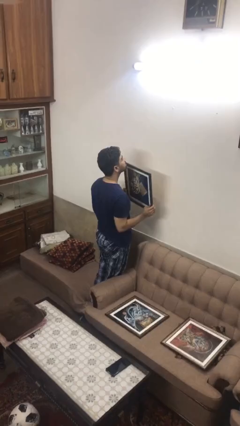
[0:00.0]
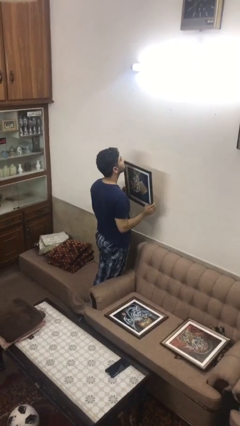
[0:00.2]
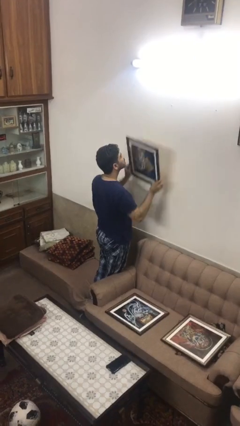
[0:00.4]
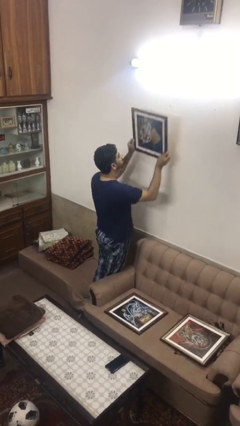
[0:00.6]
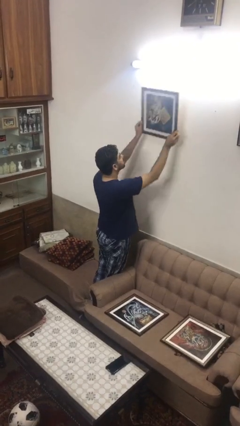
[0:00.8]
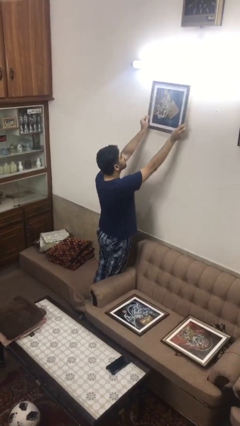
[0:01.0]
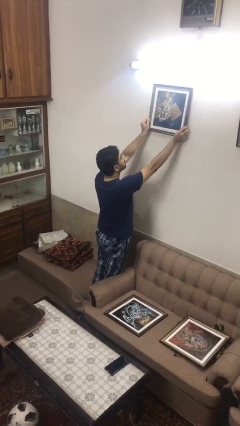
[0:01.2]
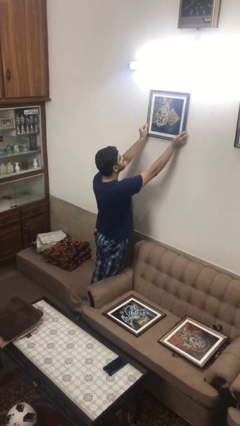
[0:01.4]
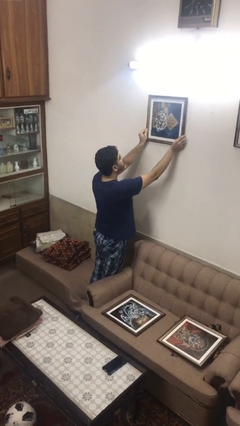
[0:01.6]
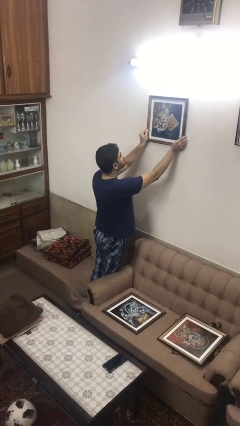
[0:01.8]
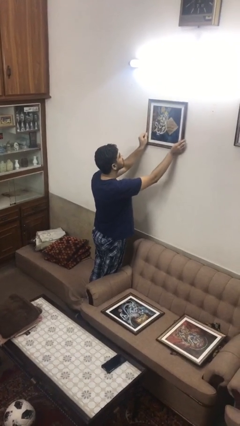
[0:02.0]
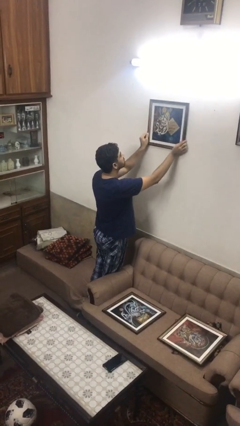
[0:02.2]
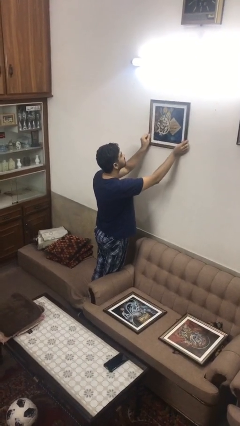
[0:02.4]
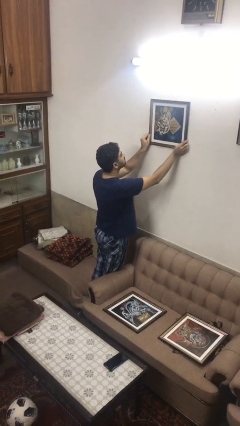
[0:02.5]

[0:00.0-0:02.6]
person puts up picture frame

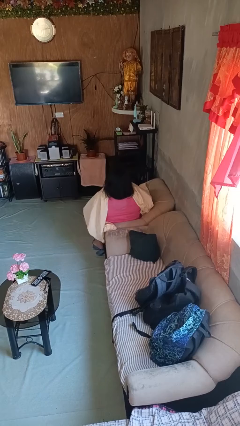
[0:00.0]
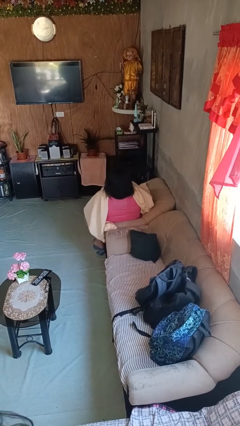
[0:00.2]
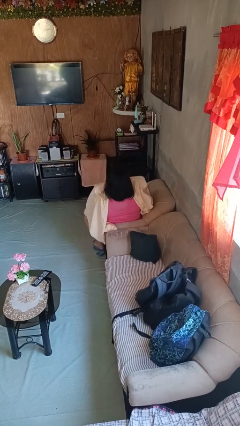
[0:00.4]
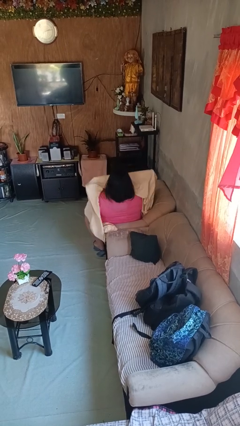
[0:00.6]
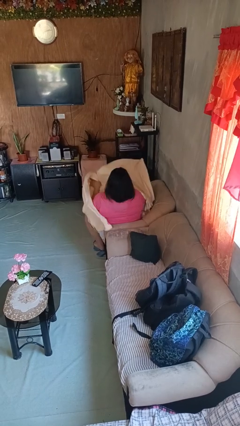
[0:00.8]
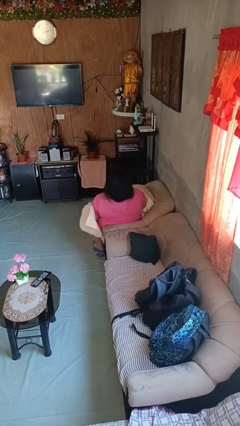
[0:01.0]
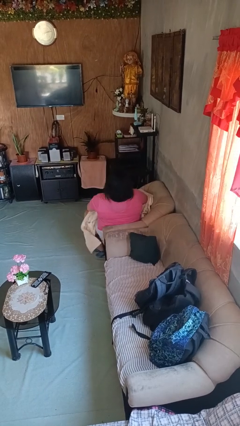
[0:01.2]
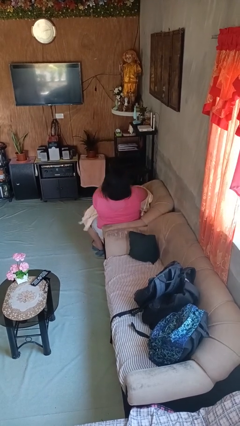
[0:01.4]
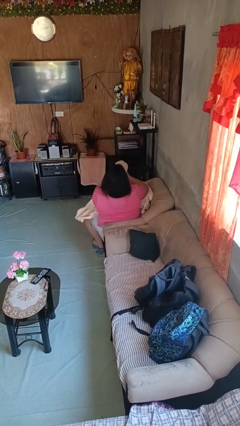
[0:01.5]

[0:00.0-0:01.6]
person uncovers with blanket

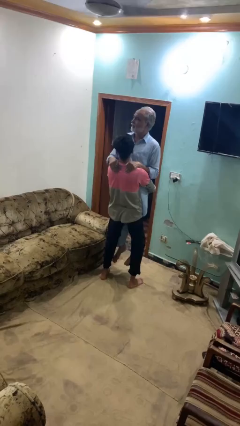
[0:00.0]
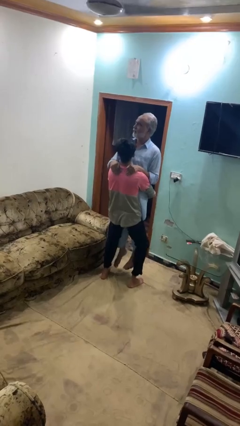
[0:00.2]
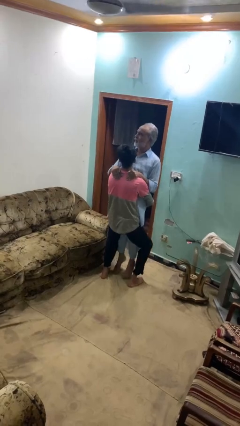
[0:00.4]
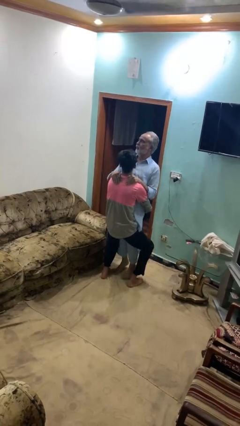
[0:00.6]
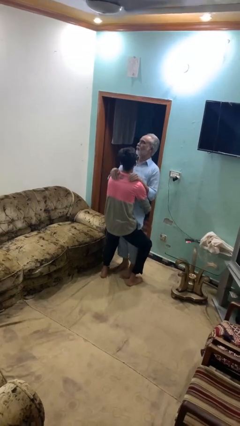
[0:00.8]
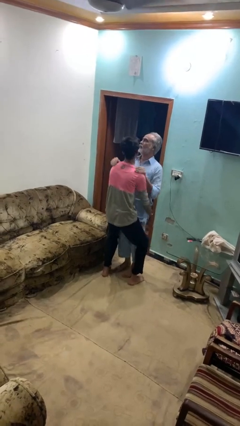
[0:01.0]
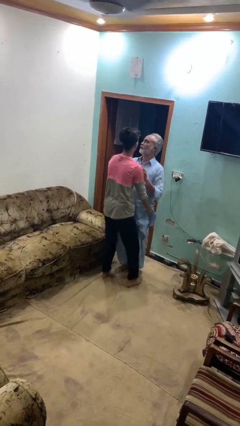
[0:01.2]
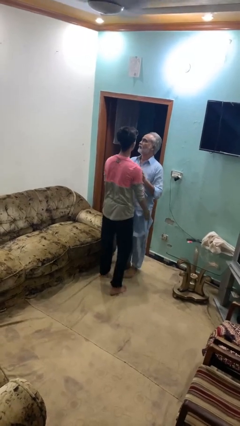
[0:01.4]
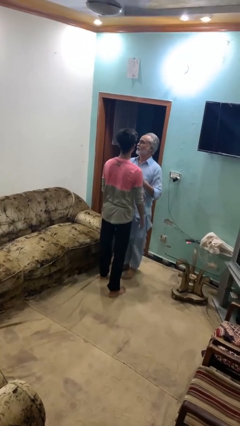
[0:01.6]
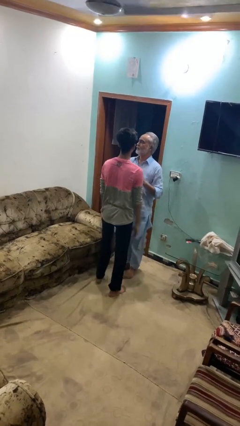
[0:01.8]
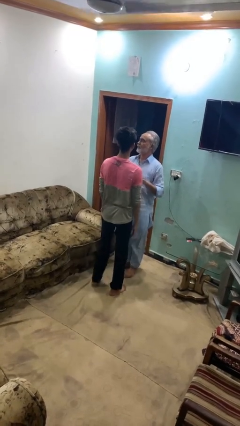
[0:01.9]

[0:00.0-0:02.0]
person puts down person

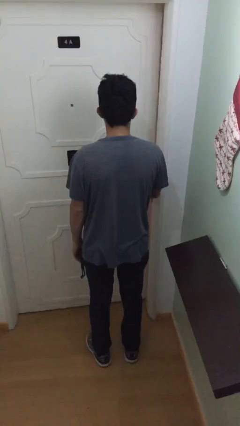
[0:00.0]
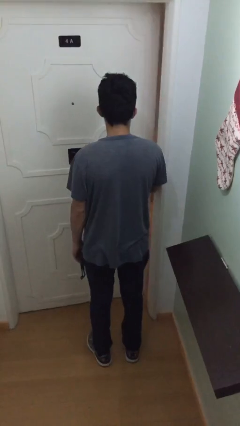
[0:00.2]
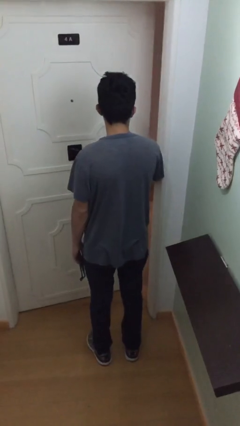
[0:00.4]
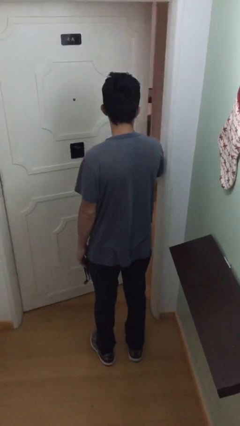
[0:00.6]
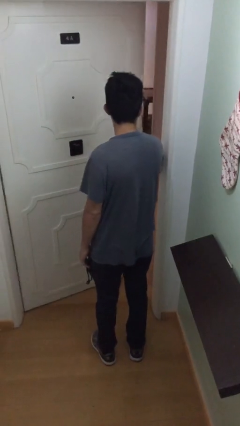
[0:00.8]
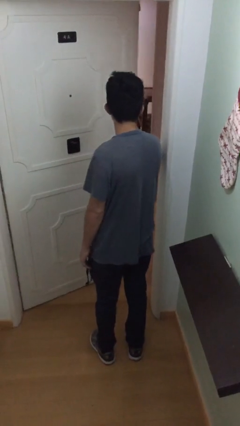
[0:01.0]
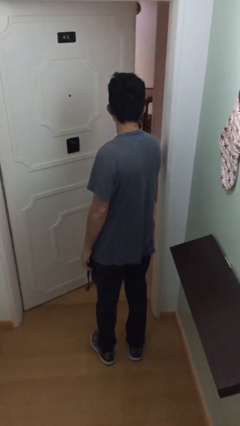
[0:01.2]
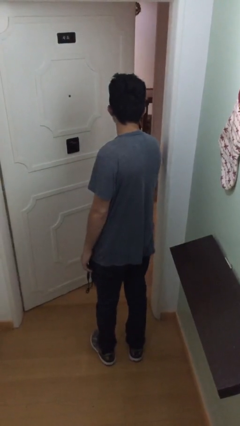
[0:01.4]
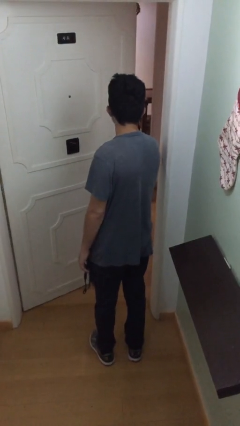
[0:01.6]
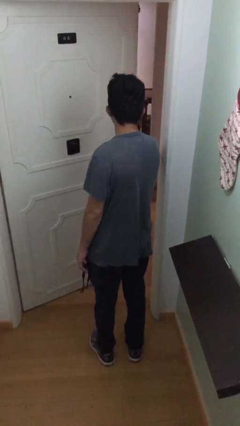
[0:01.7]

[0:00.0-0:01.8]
person opens facility door

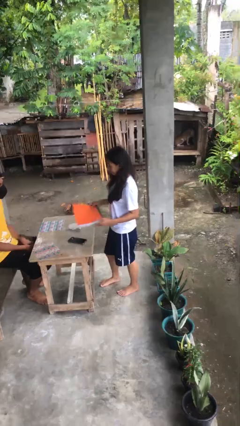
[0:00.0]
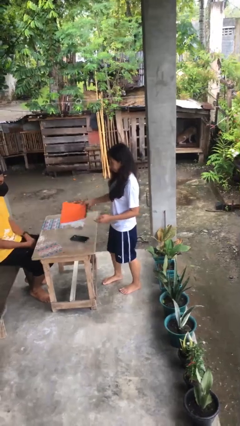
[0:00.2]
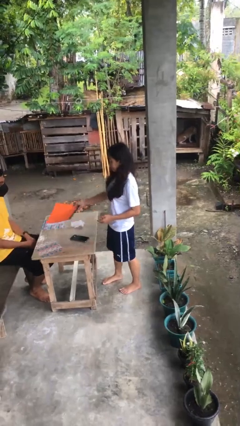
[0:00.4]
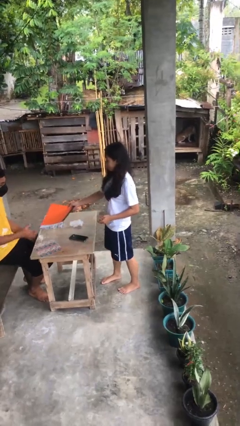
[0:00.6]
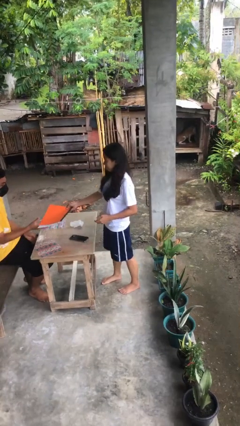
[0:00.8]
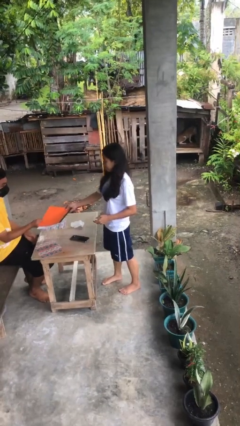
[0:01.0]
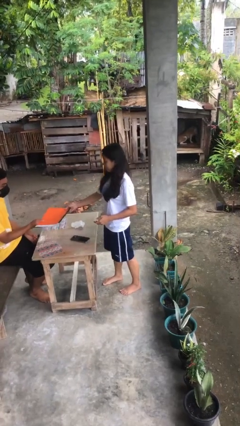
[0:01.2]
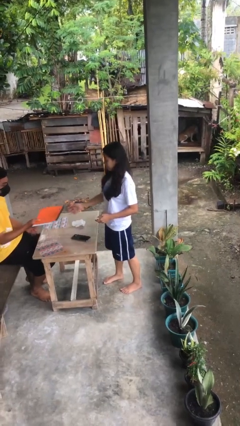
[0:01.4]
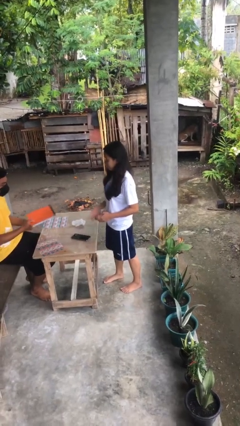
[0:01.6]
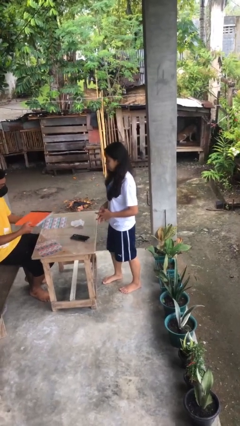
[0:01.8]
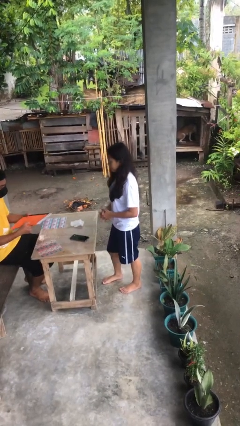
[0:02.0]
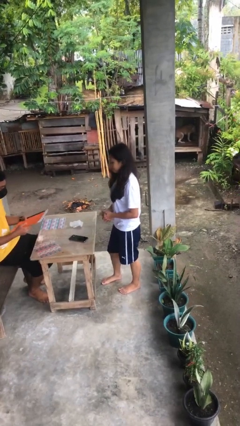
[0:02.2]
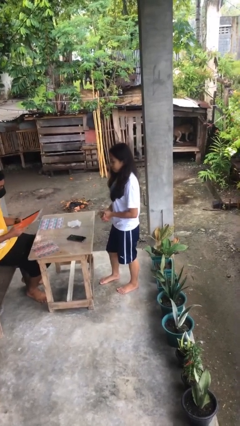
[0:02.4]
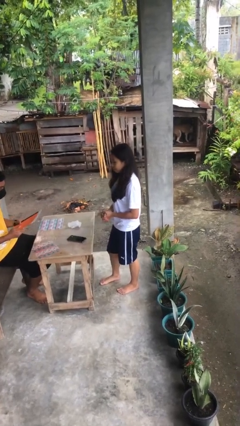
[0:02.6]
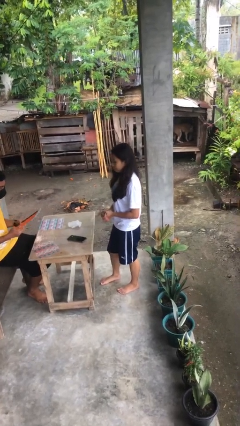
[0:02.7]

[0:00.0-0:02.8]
person transfers object to person

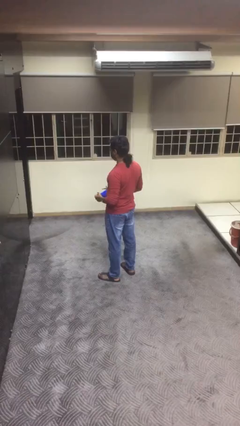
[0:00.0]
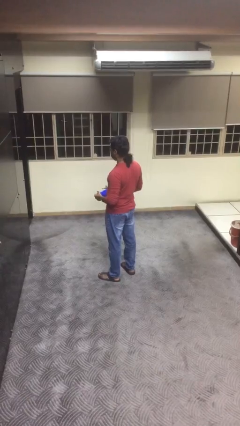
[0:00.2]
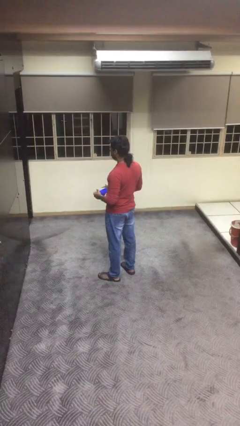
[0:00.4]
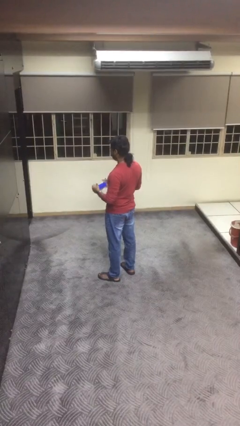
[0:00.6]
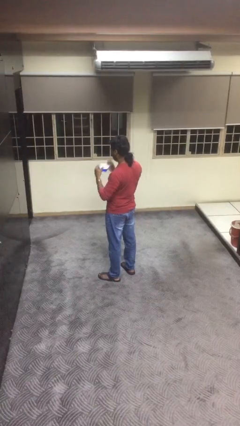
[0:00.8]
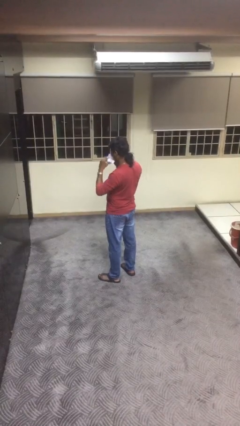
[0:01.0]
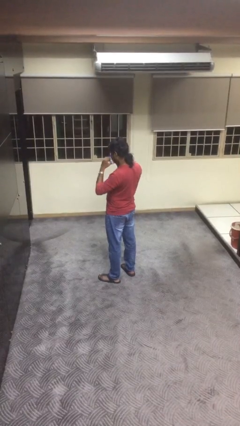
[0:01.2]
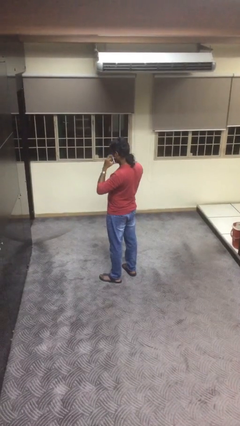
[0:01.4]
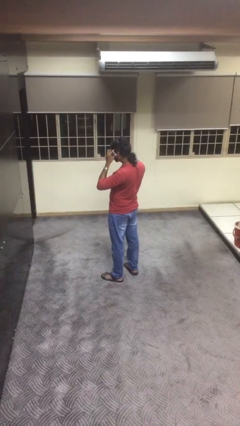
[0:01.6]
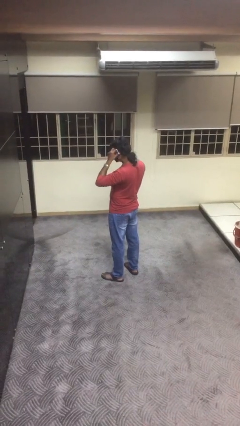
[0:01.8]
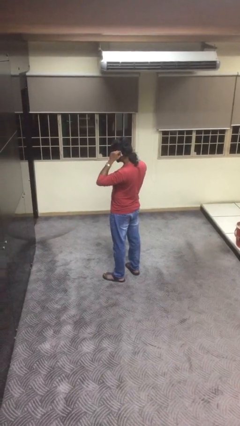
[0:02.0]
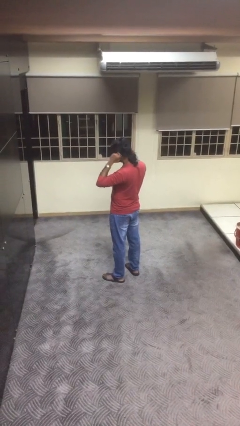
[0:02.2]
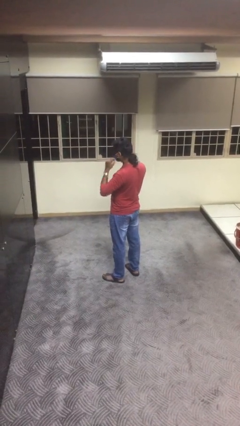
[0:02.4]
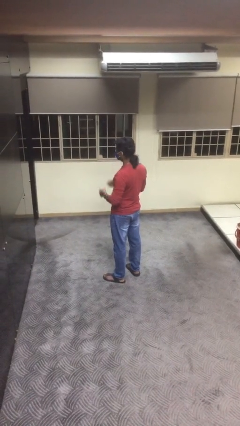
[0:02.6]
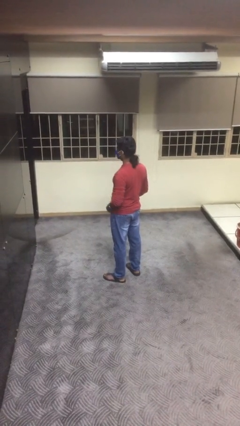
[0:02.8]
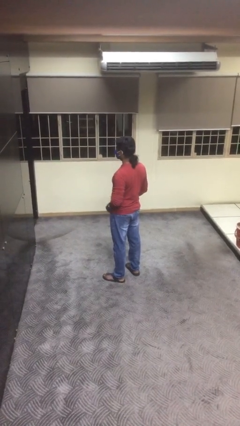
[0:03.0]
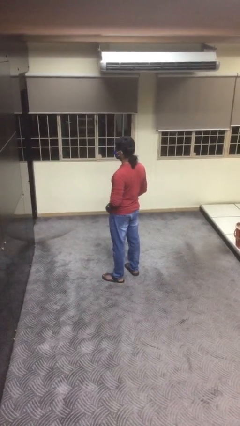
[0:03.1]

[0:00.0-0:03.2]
person puts on facemask

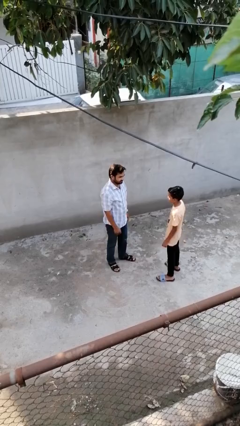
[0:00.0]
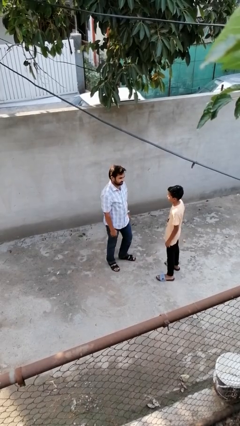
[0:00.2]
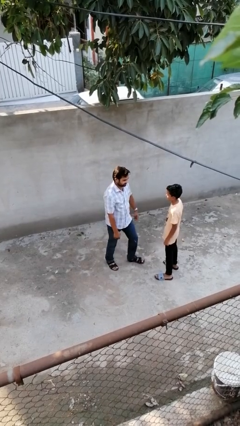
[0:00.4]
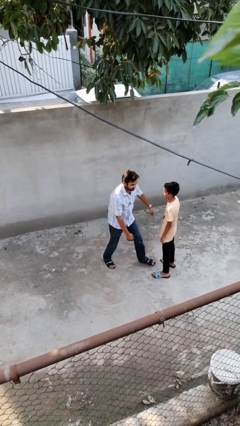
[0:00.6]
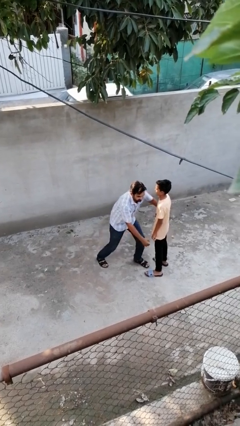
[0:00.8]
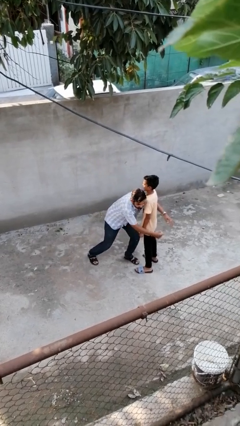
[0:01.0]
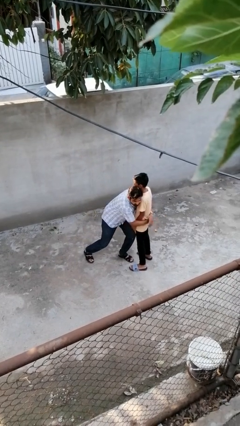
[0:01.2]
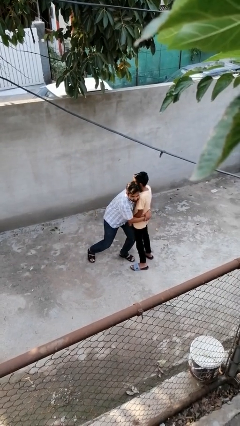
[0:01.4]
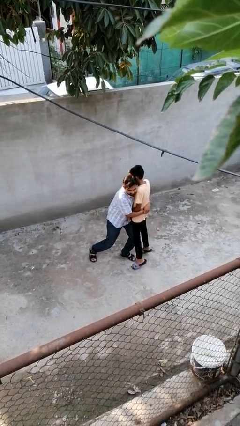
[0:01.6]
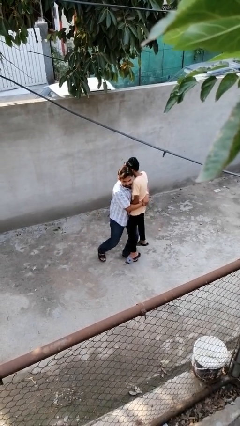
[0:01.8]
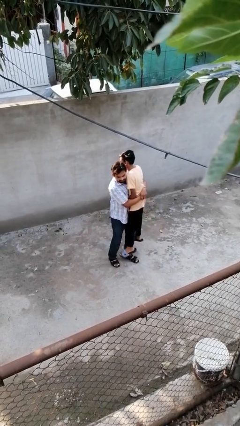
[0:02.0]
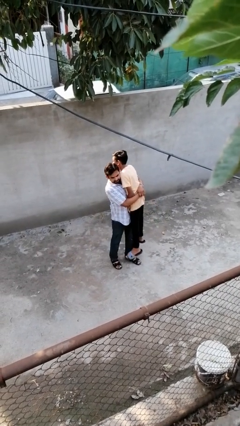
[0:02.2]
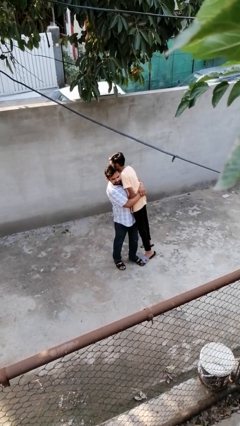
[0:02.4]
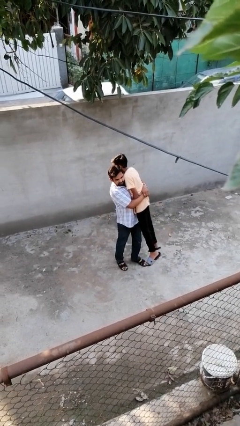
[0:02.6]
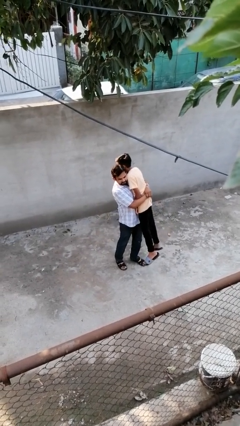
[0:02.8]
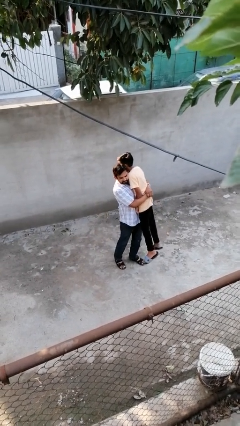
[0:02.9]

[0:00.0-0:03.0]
person picks up person
